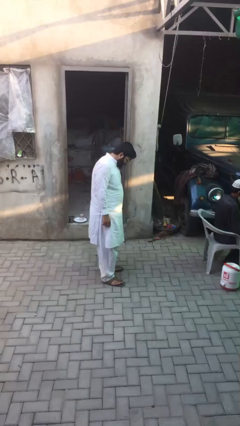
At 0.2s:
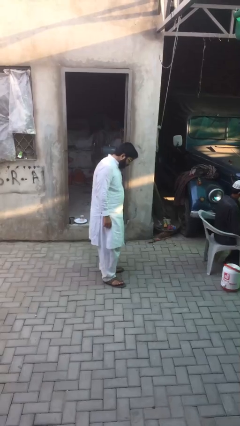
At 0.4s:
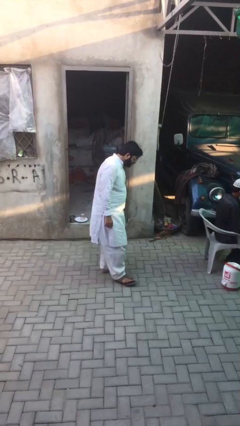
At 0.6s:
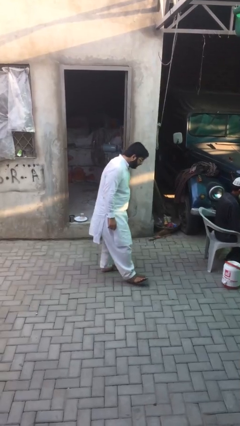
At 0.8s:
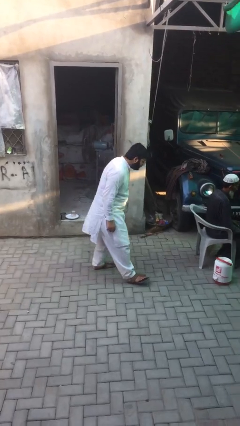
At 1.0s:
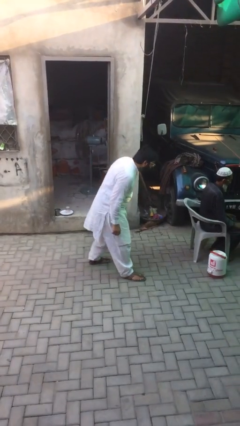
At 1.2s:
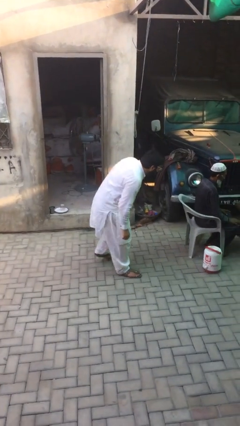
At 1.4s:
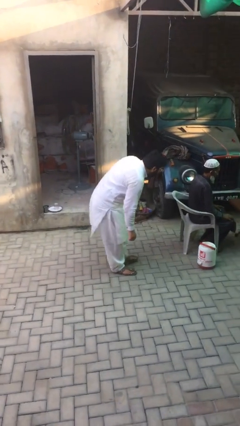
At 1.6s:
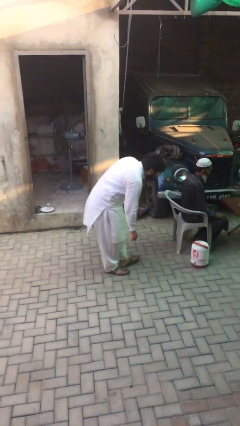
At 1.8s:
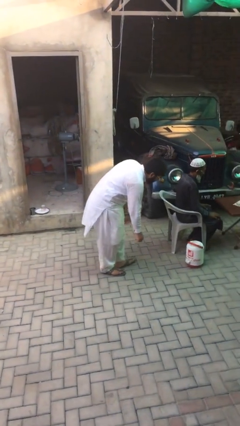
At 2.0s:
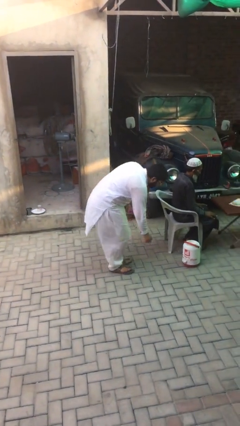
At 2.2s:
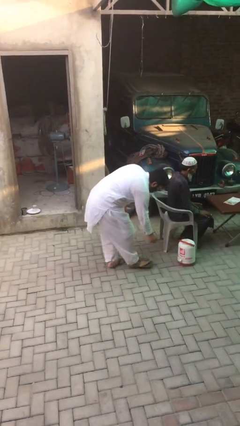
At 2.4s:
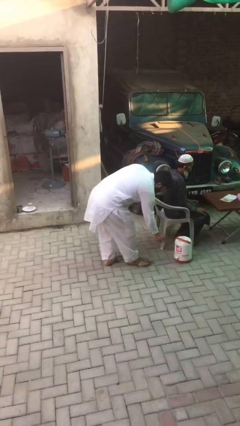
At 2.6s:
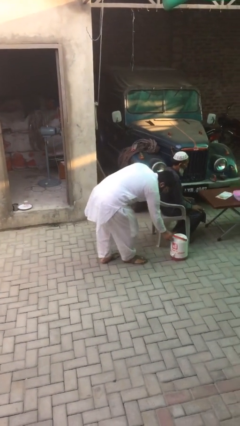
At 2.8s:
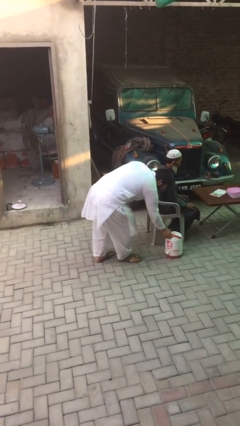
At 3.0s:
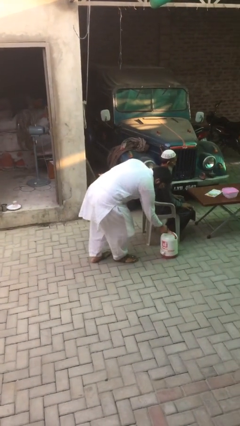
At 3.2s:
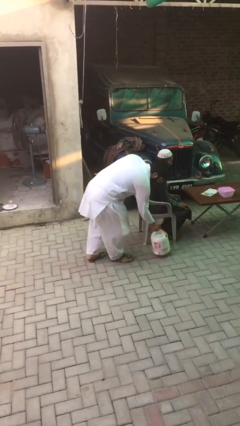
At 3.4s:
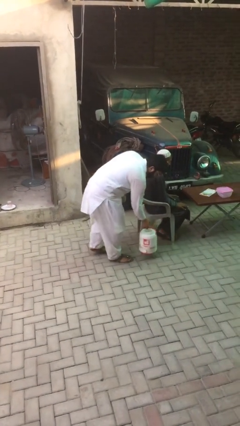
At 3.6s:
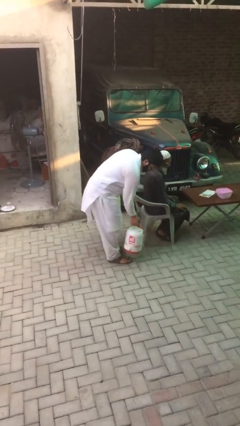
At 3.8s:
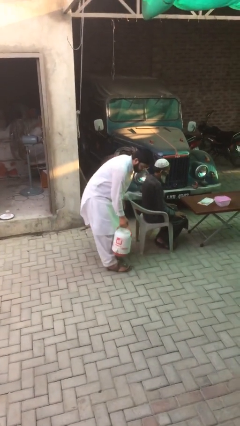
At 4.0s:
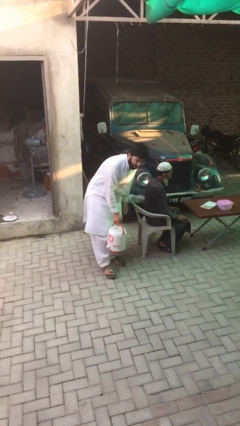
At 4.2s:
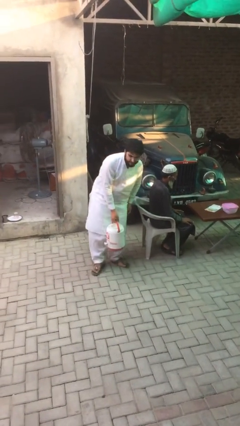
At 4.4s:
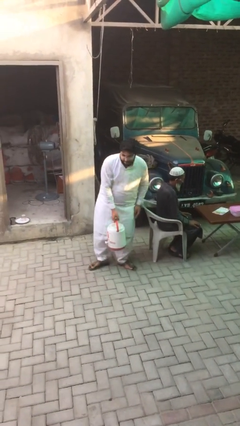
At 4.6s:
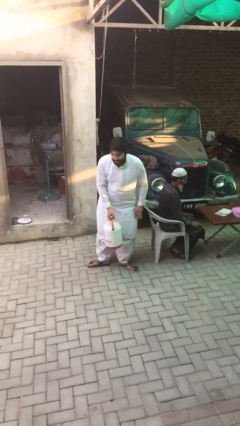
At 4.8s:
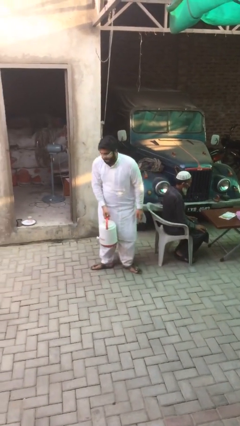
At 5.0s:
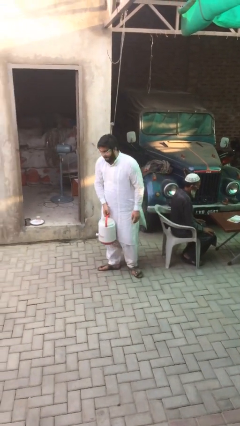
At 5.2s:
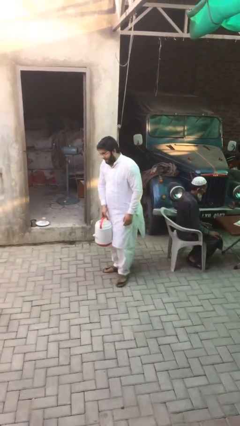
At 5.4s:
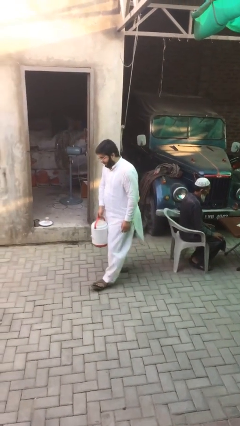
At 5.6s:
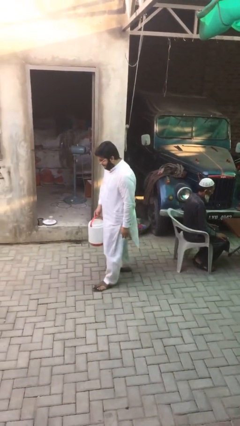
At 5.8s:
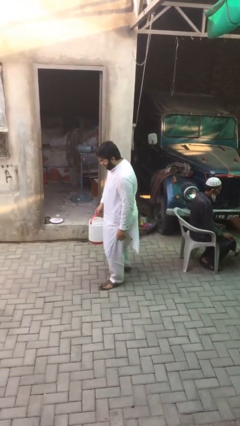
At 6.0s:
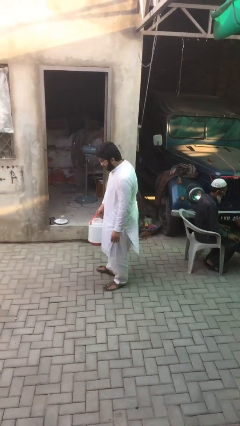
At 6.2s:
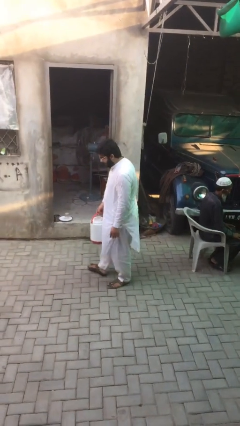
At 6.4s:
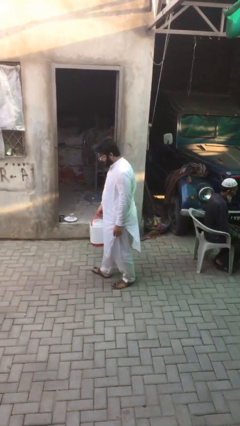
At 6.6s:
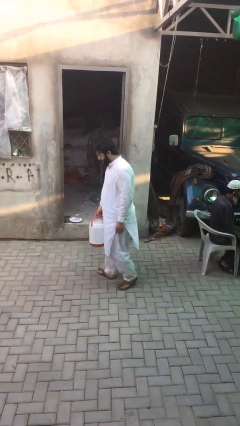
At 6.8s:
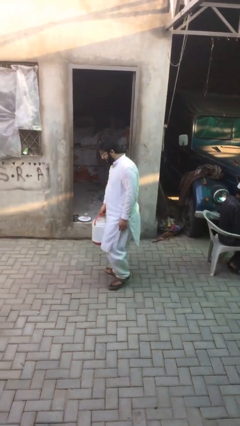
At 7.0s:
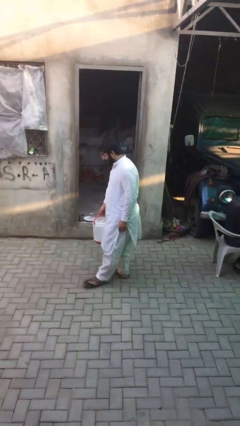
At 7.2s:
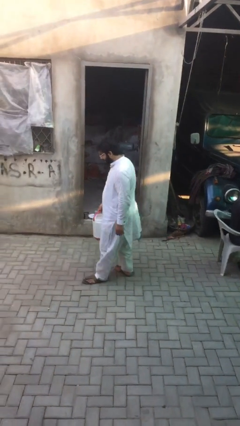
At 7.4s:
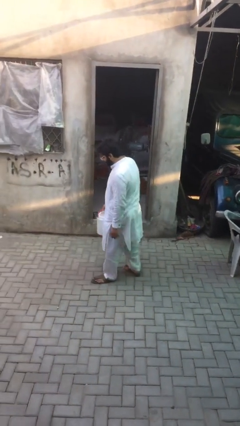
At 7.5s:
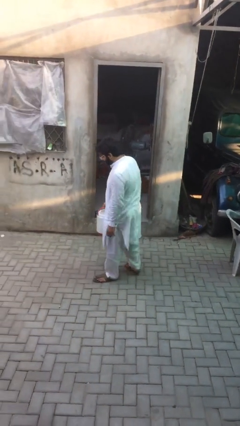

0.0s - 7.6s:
person steals object from person

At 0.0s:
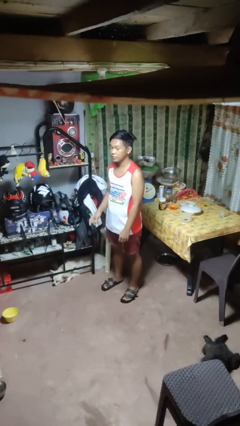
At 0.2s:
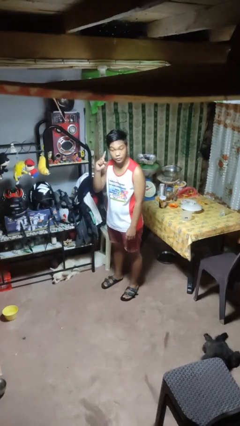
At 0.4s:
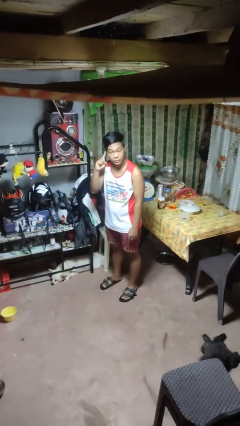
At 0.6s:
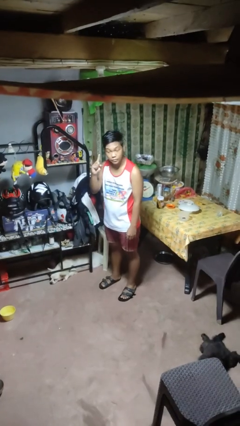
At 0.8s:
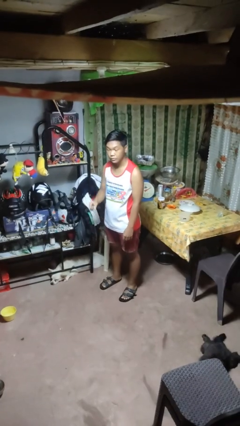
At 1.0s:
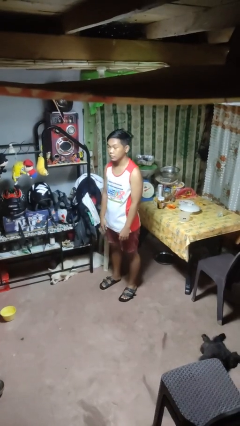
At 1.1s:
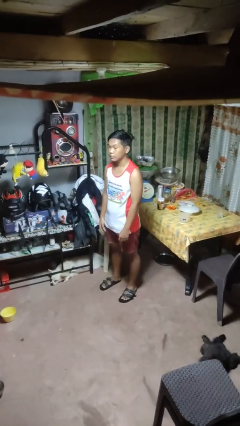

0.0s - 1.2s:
person gestures listen closely

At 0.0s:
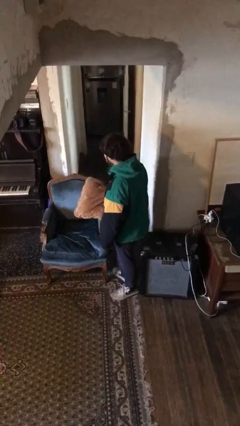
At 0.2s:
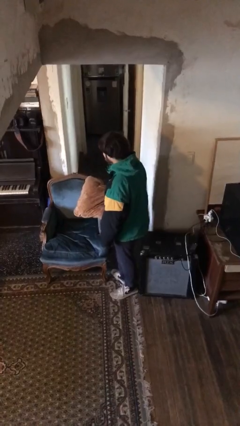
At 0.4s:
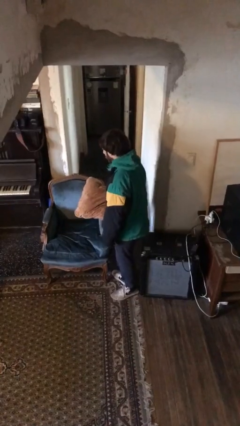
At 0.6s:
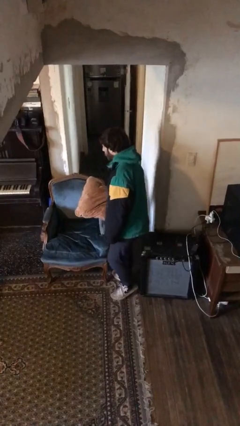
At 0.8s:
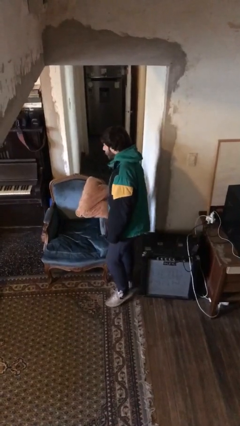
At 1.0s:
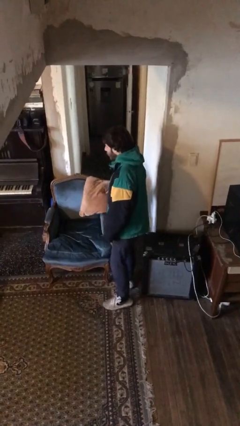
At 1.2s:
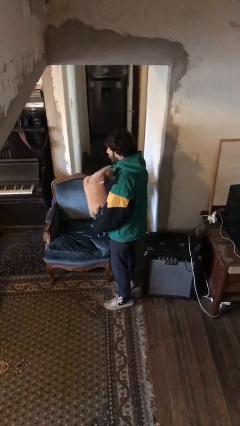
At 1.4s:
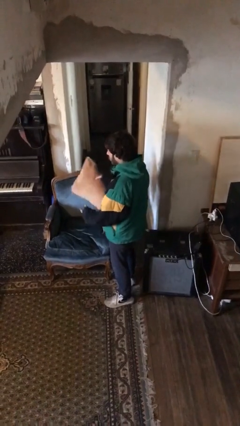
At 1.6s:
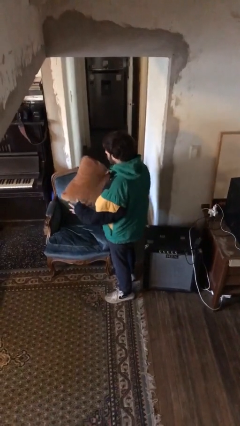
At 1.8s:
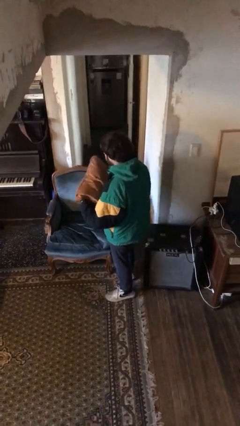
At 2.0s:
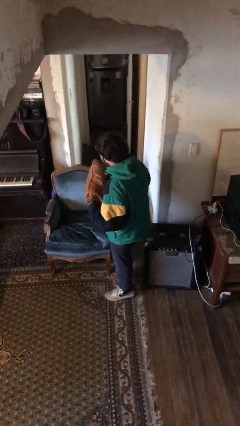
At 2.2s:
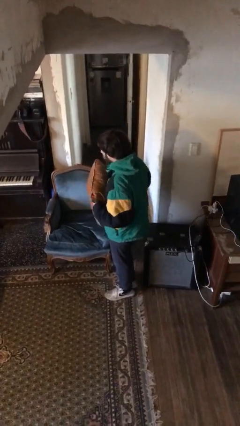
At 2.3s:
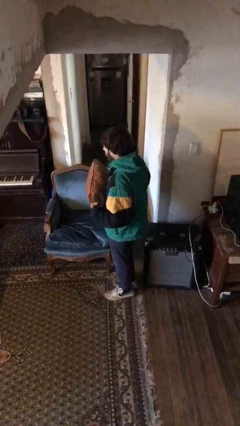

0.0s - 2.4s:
person picks up object from couch

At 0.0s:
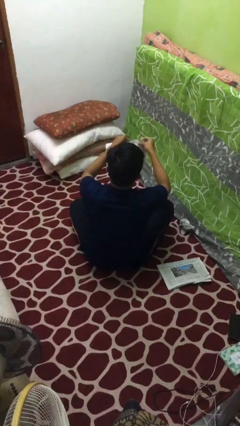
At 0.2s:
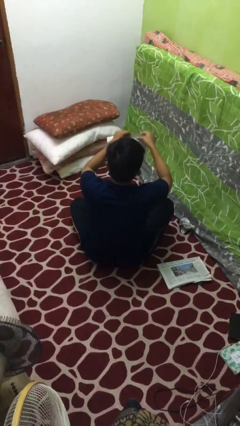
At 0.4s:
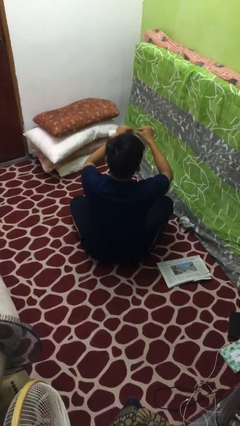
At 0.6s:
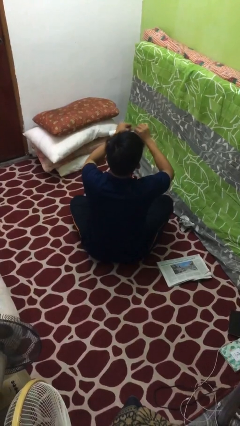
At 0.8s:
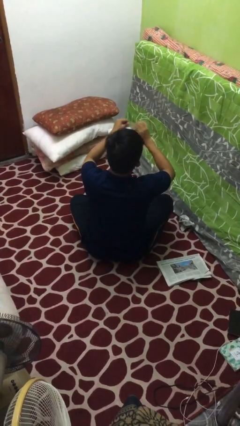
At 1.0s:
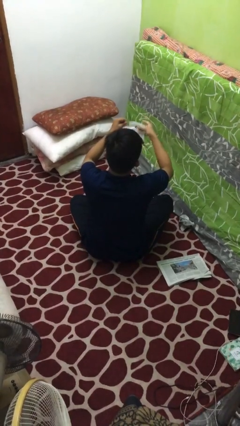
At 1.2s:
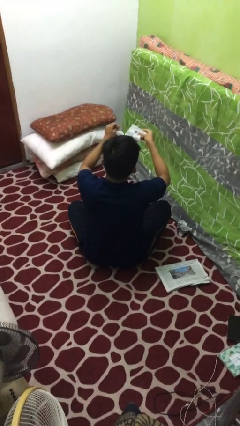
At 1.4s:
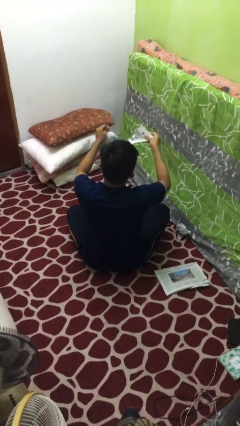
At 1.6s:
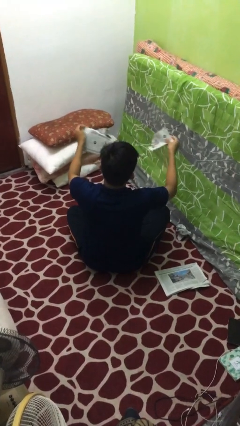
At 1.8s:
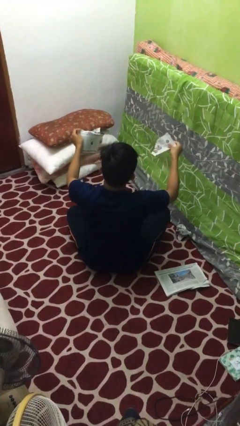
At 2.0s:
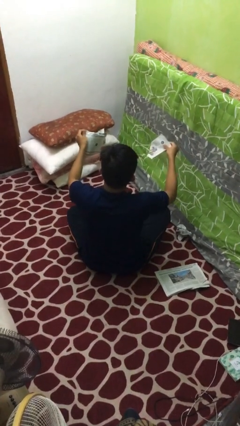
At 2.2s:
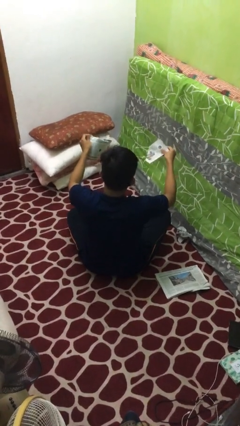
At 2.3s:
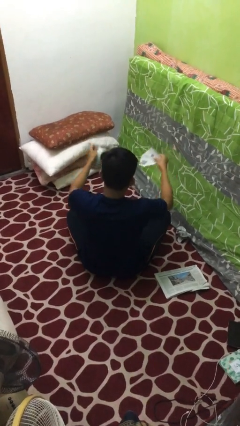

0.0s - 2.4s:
person tears paper

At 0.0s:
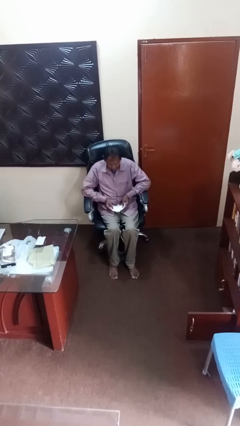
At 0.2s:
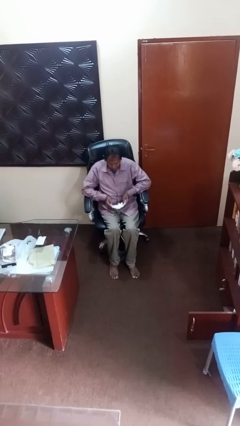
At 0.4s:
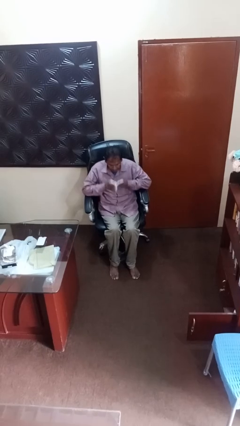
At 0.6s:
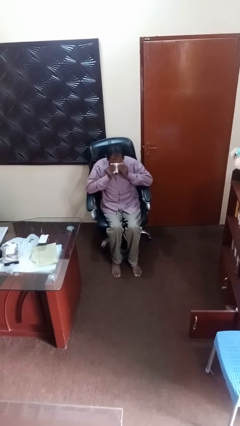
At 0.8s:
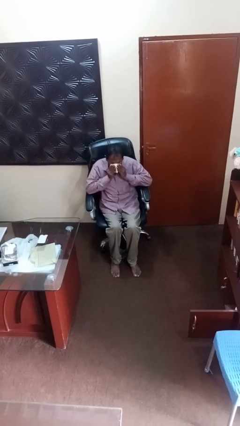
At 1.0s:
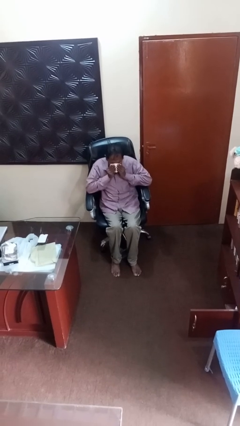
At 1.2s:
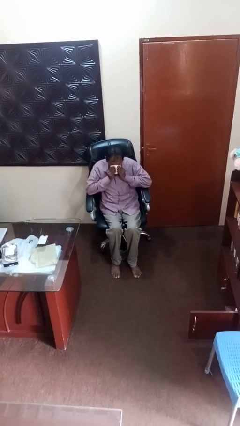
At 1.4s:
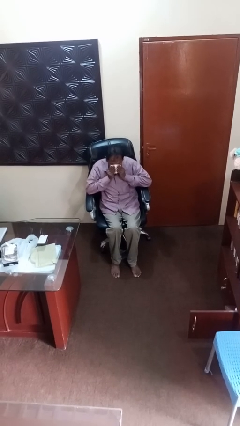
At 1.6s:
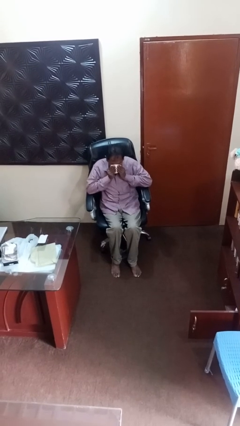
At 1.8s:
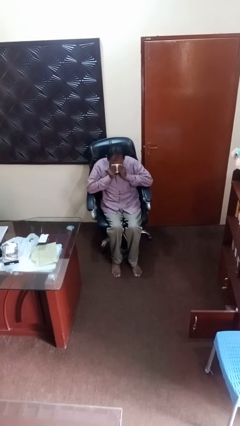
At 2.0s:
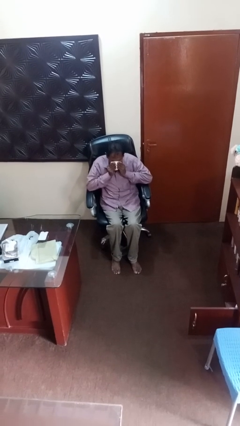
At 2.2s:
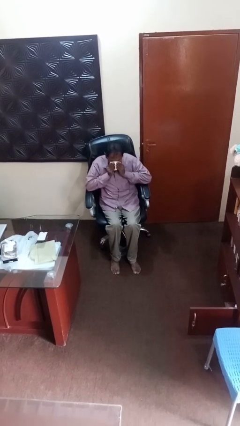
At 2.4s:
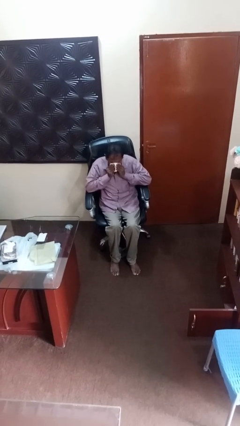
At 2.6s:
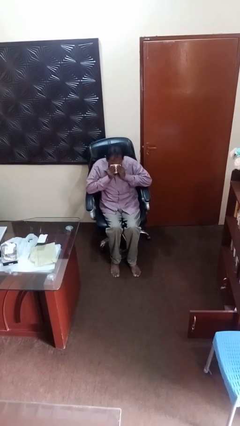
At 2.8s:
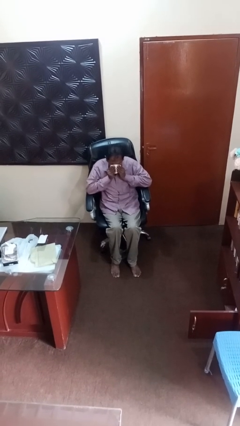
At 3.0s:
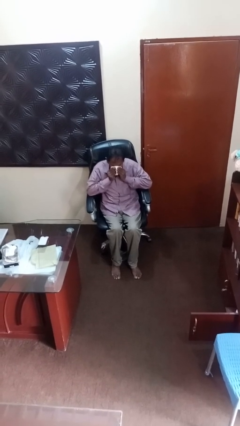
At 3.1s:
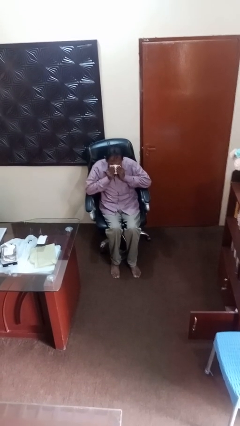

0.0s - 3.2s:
person blows nose

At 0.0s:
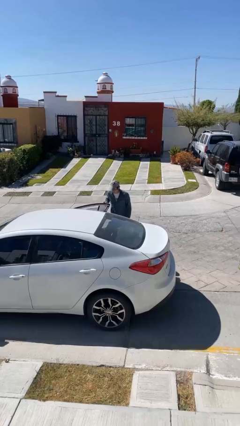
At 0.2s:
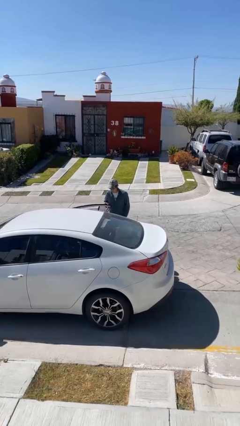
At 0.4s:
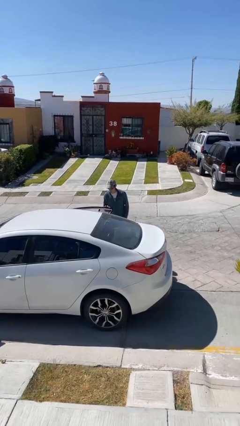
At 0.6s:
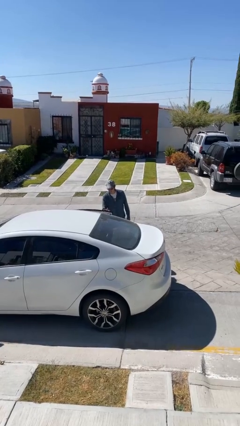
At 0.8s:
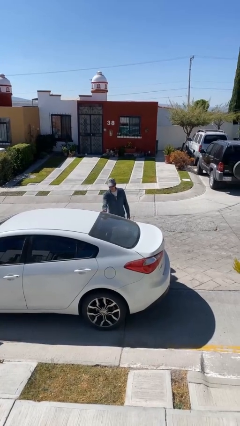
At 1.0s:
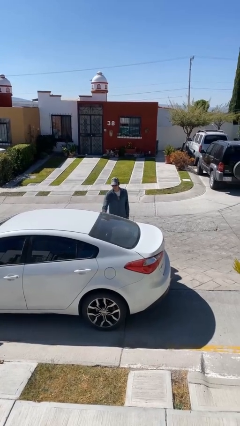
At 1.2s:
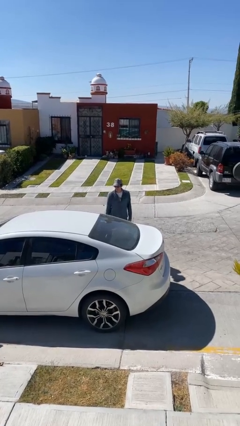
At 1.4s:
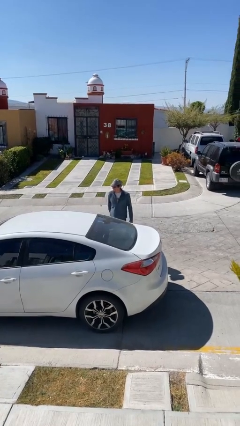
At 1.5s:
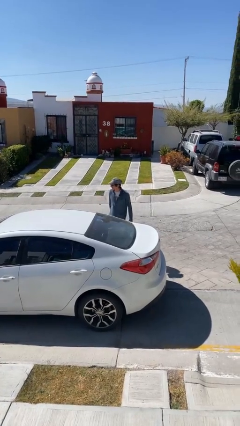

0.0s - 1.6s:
person closes car door
